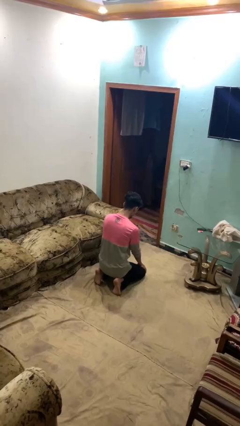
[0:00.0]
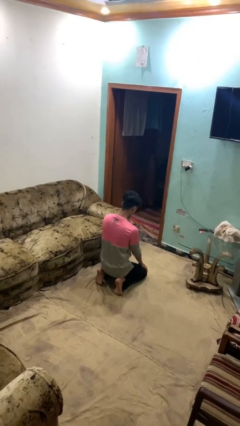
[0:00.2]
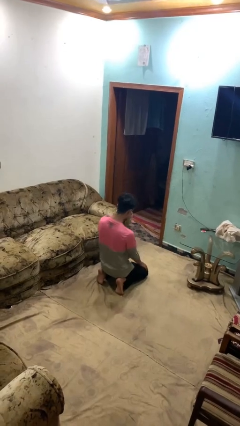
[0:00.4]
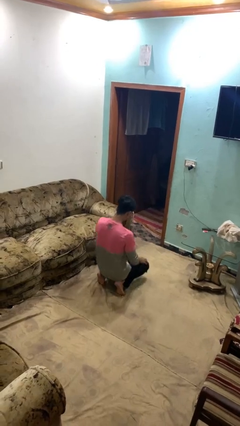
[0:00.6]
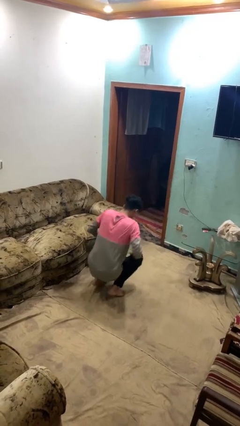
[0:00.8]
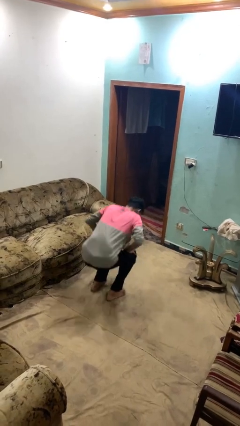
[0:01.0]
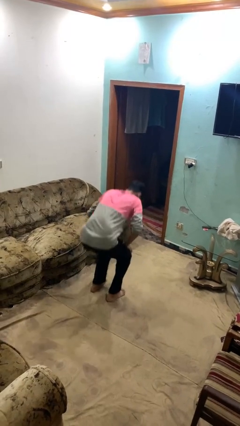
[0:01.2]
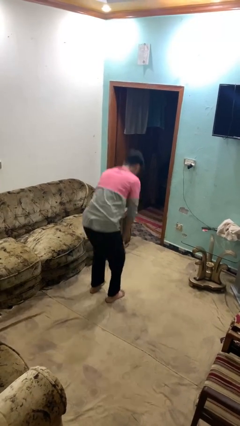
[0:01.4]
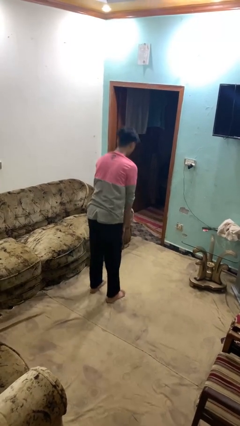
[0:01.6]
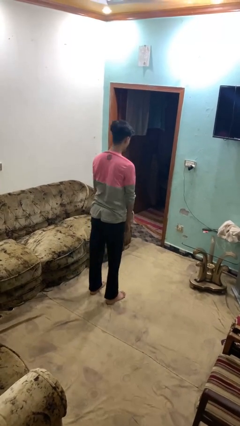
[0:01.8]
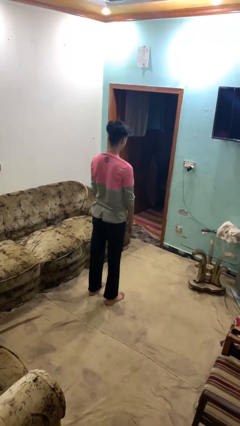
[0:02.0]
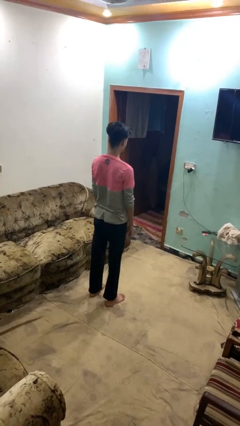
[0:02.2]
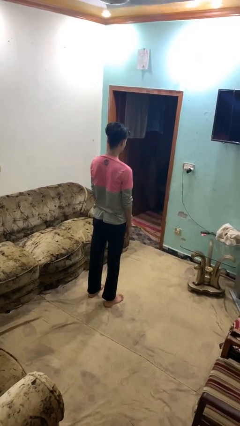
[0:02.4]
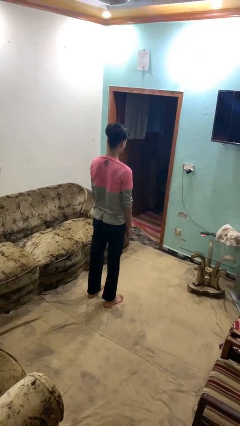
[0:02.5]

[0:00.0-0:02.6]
person stands up from floor

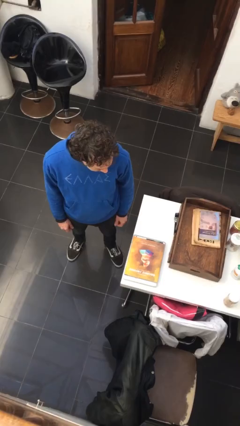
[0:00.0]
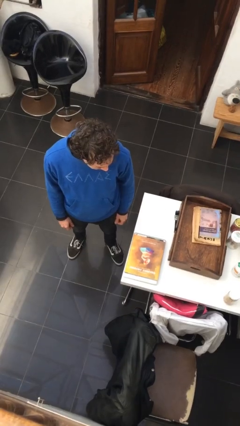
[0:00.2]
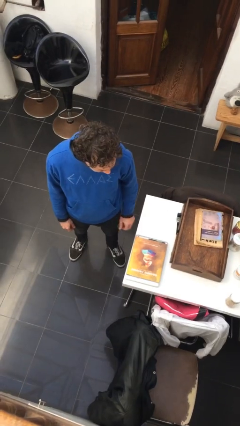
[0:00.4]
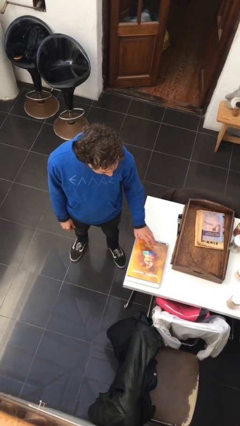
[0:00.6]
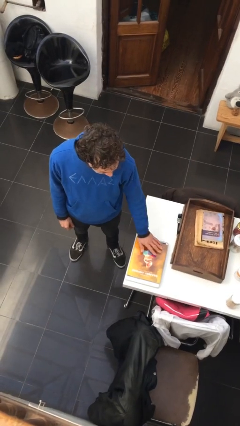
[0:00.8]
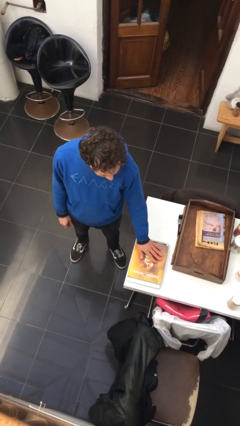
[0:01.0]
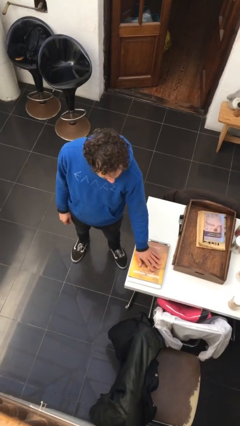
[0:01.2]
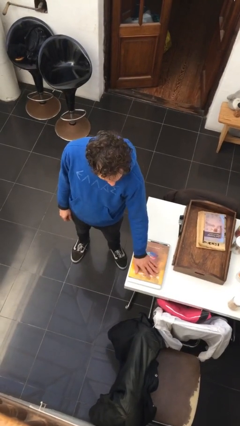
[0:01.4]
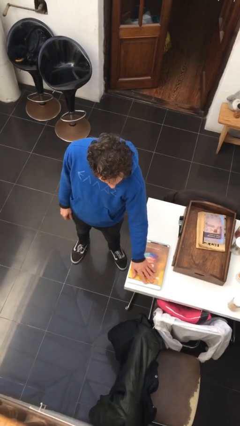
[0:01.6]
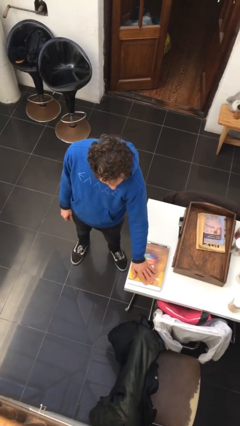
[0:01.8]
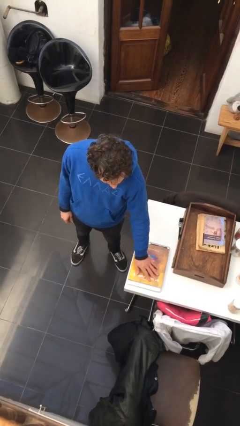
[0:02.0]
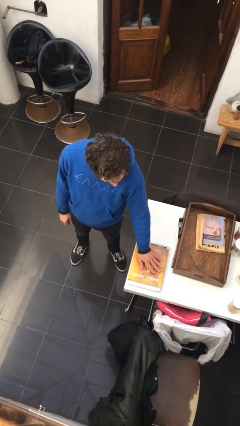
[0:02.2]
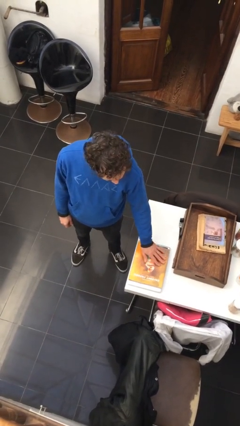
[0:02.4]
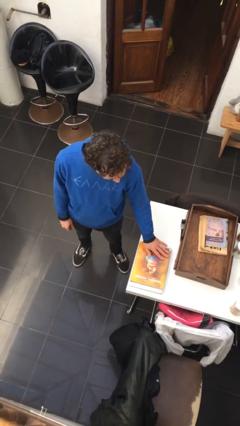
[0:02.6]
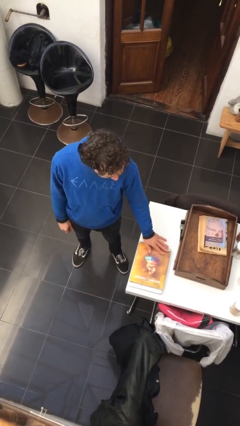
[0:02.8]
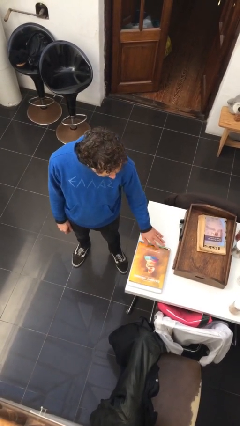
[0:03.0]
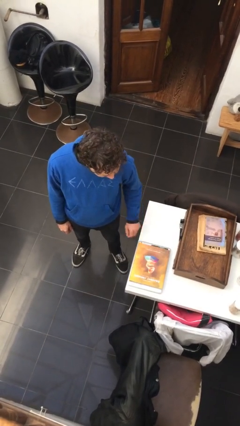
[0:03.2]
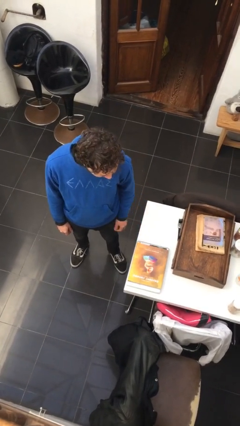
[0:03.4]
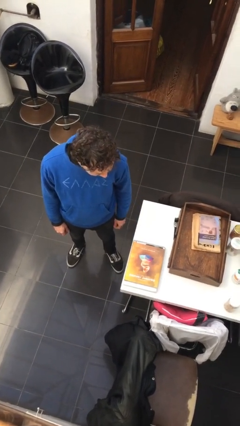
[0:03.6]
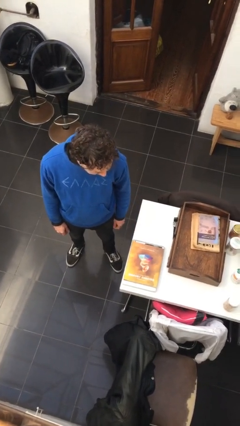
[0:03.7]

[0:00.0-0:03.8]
person waves hand over object

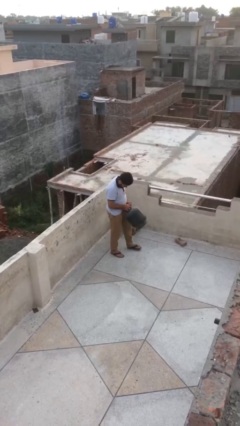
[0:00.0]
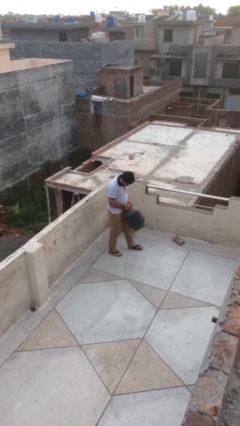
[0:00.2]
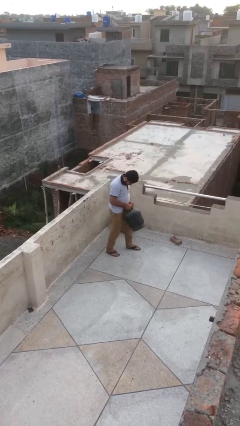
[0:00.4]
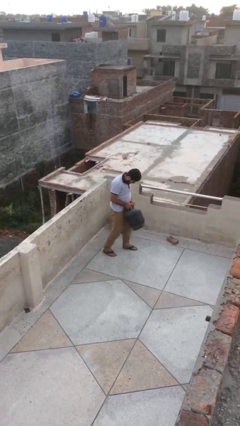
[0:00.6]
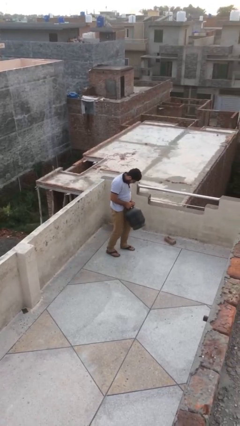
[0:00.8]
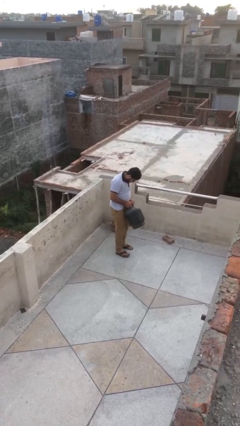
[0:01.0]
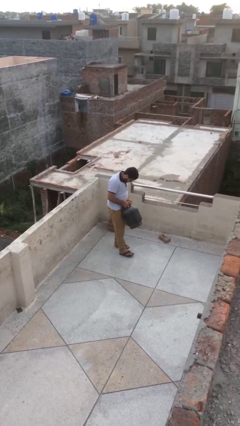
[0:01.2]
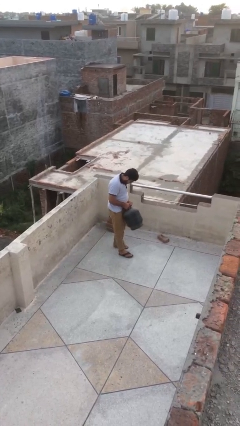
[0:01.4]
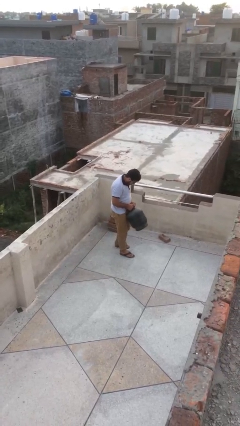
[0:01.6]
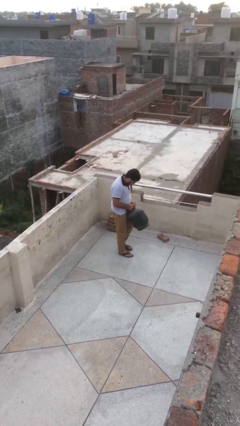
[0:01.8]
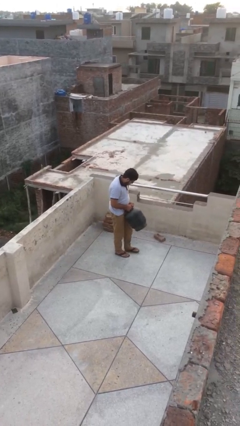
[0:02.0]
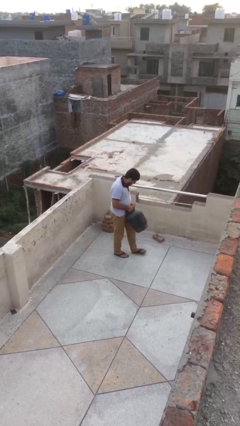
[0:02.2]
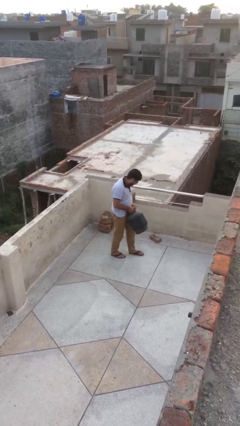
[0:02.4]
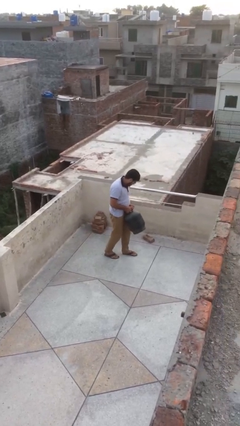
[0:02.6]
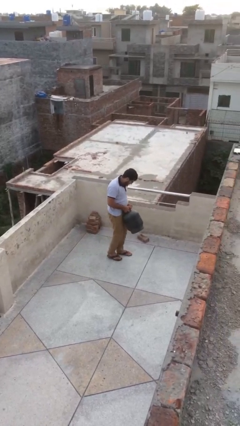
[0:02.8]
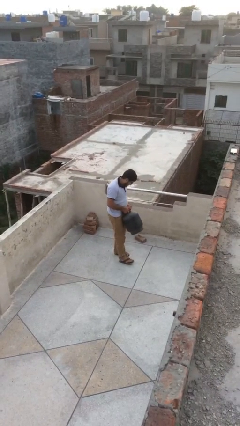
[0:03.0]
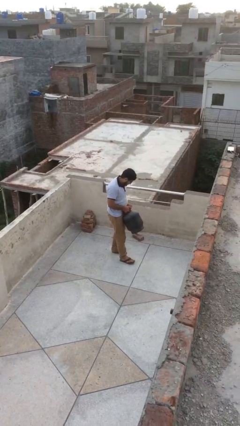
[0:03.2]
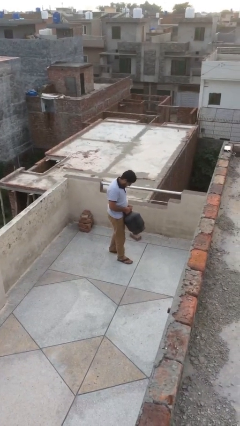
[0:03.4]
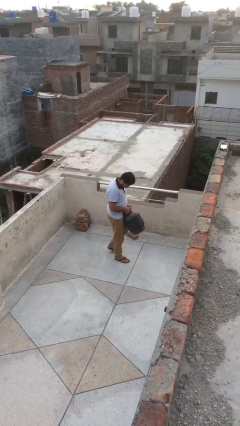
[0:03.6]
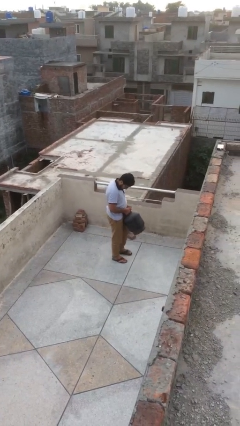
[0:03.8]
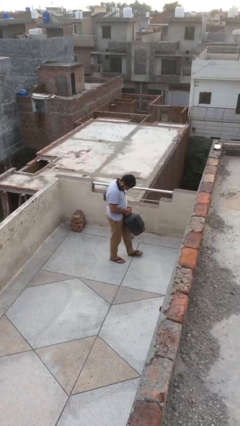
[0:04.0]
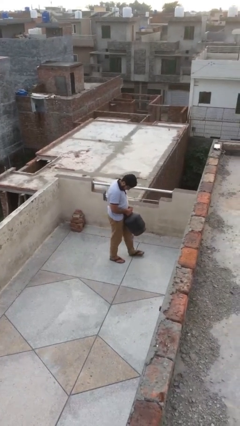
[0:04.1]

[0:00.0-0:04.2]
person carries heavy object

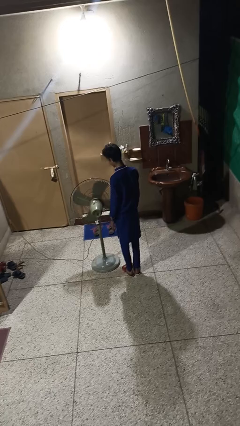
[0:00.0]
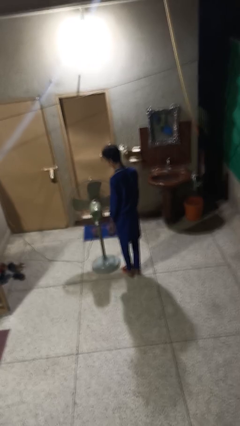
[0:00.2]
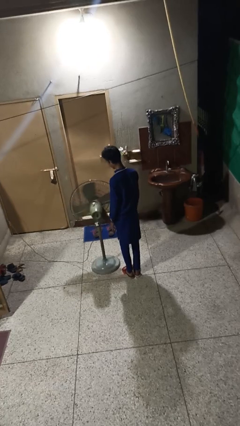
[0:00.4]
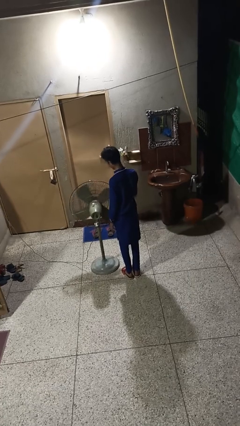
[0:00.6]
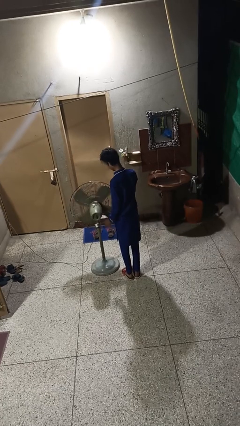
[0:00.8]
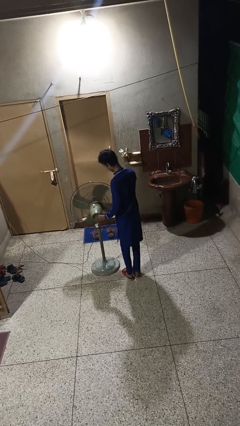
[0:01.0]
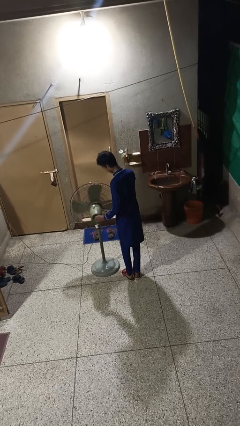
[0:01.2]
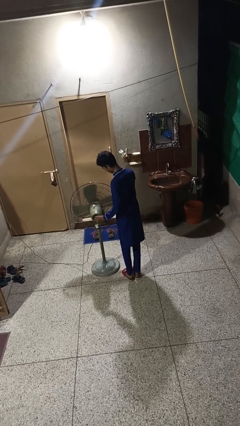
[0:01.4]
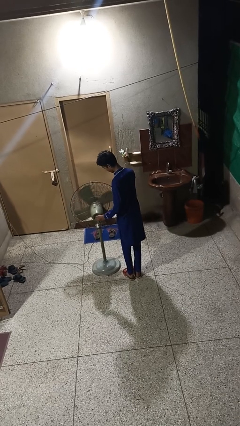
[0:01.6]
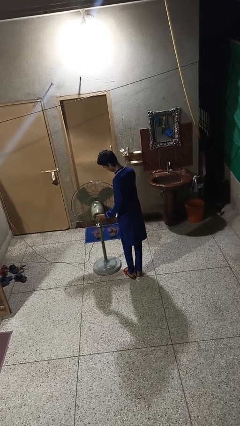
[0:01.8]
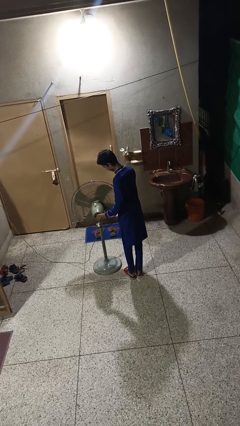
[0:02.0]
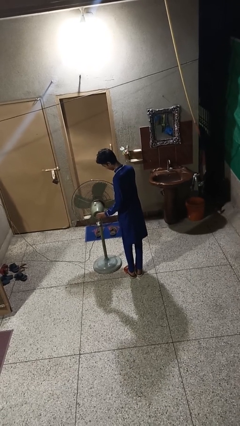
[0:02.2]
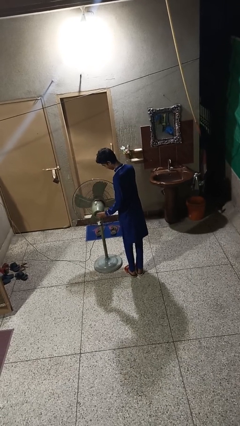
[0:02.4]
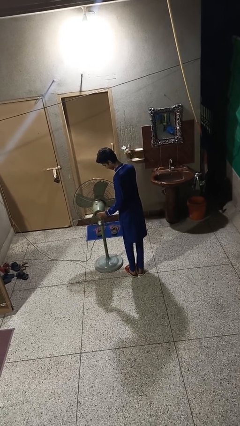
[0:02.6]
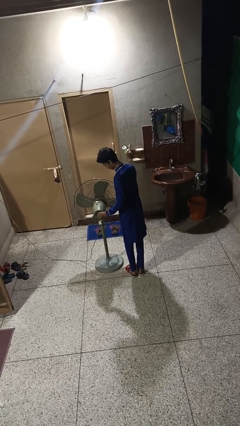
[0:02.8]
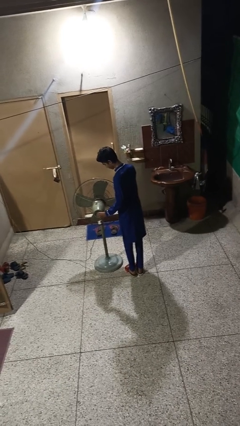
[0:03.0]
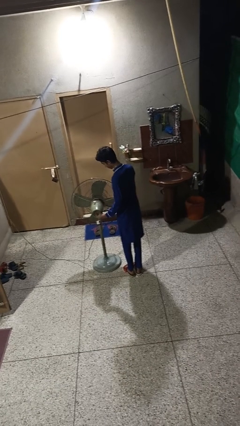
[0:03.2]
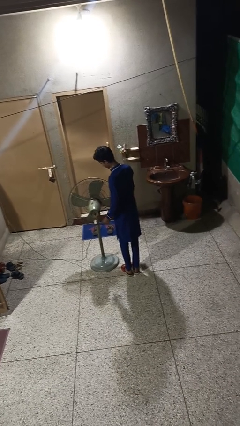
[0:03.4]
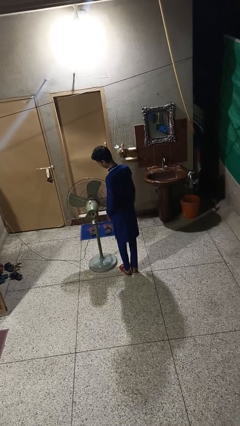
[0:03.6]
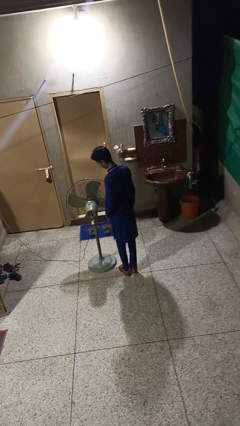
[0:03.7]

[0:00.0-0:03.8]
person turns off fan

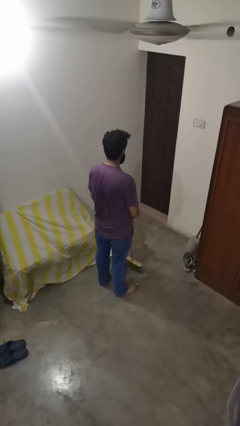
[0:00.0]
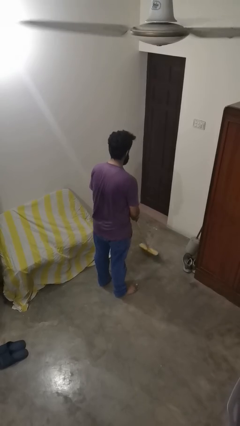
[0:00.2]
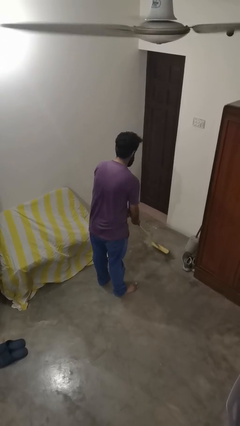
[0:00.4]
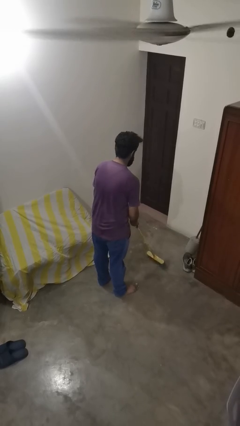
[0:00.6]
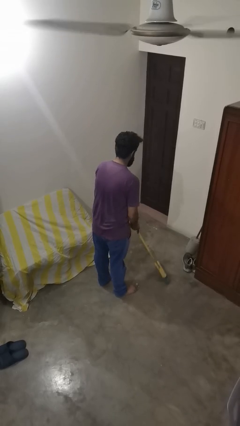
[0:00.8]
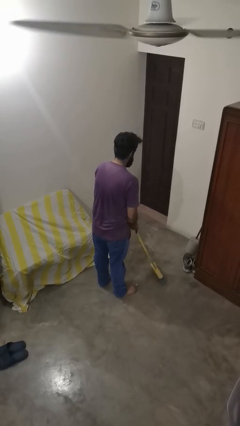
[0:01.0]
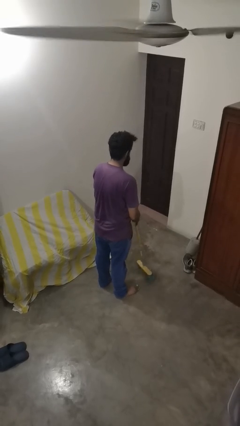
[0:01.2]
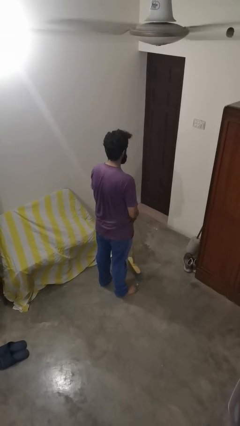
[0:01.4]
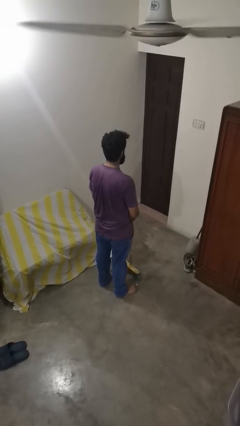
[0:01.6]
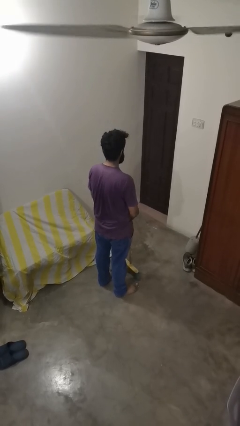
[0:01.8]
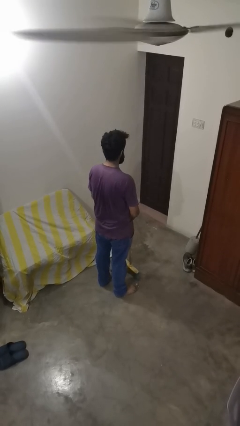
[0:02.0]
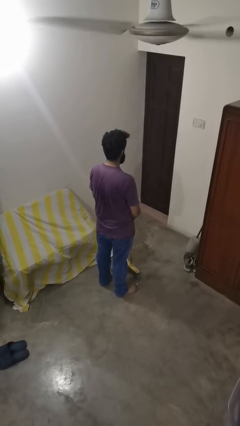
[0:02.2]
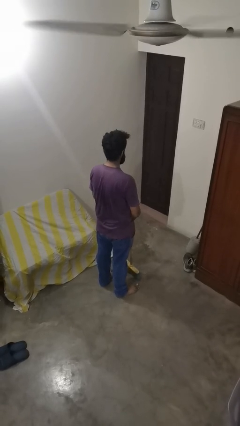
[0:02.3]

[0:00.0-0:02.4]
person sweeps floor

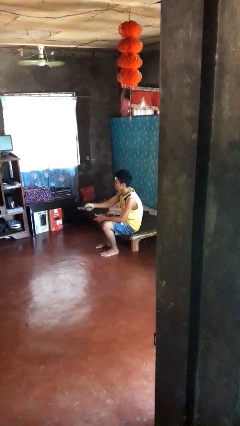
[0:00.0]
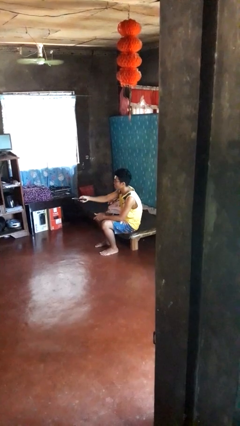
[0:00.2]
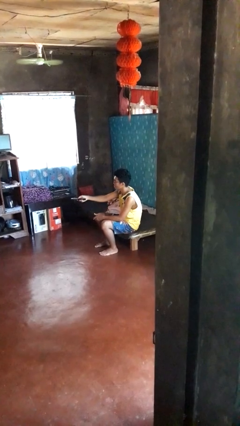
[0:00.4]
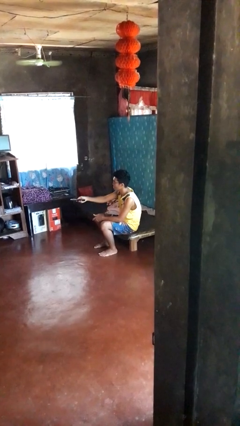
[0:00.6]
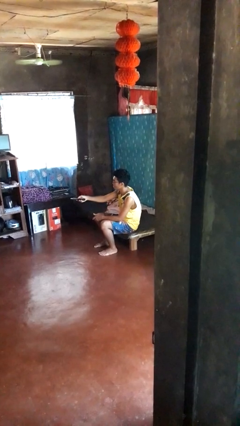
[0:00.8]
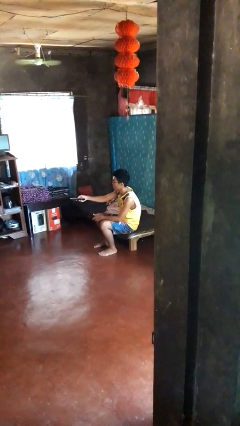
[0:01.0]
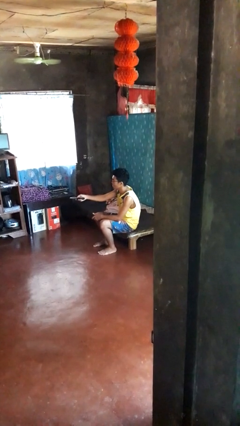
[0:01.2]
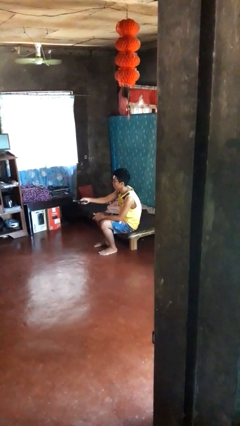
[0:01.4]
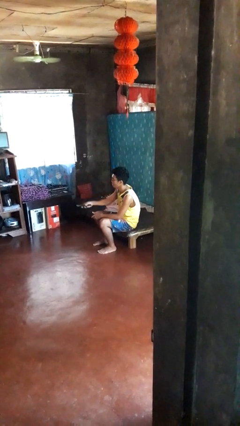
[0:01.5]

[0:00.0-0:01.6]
person uses television remote
